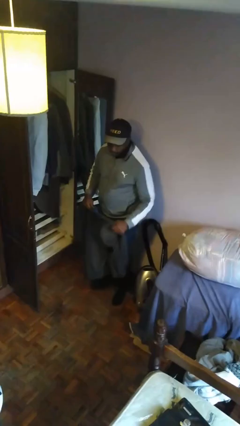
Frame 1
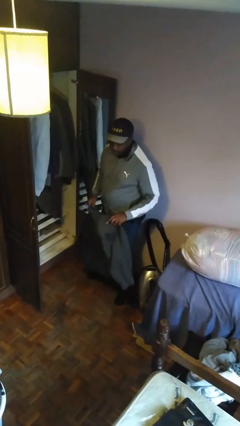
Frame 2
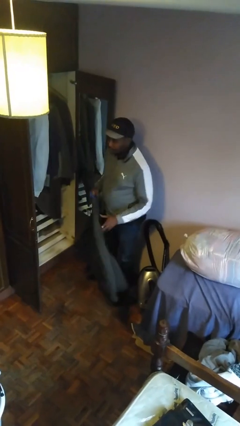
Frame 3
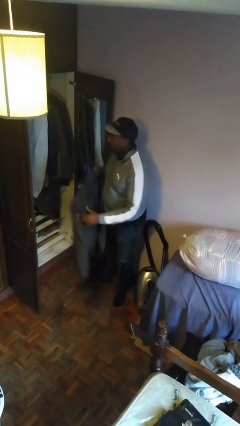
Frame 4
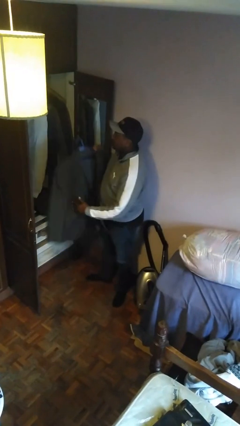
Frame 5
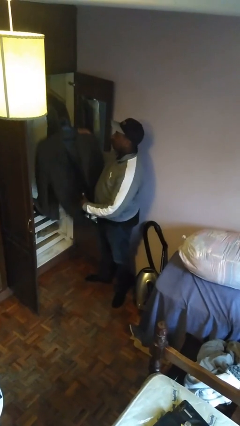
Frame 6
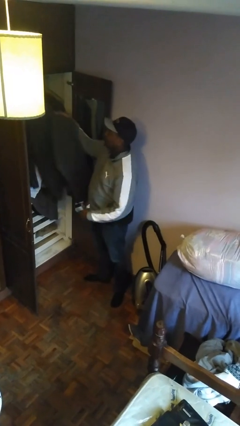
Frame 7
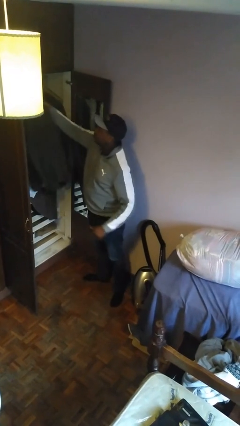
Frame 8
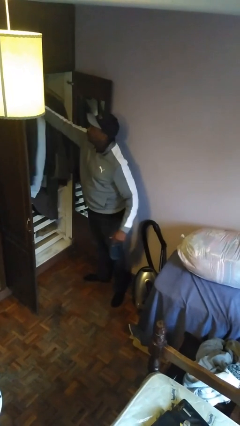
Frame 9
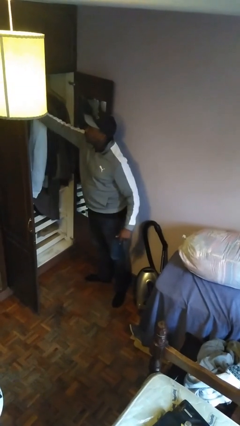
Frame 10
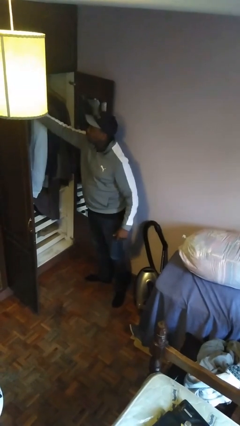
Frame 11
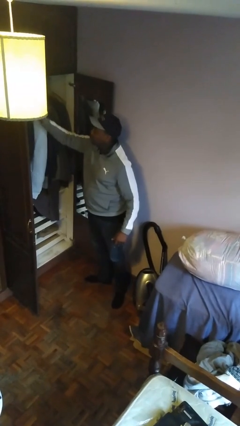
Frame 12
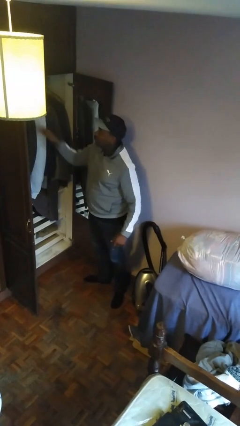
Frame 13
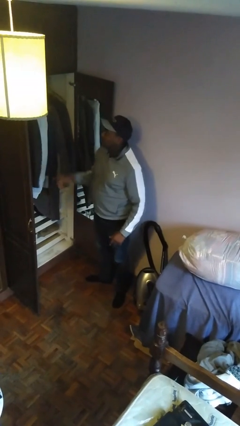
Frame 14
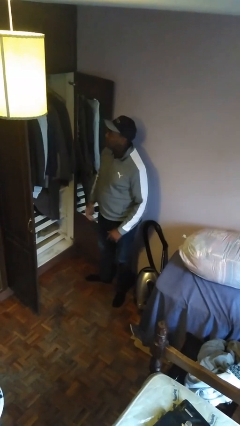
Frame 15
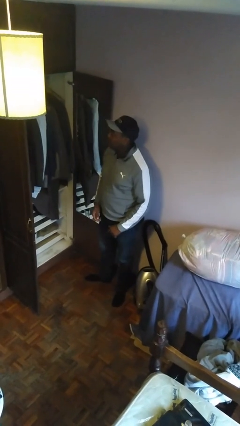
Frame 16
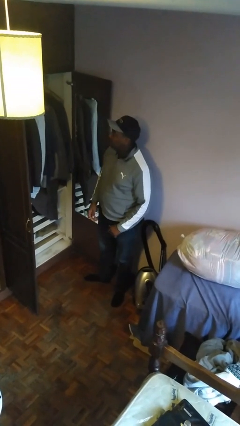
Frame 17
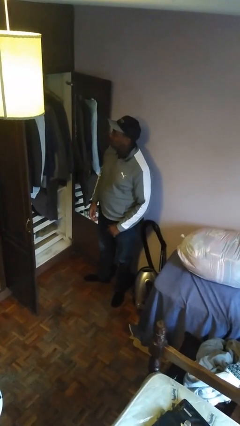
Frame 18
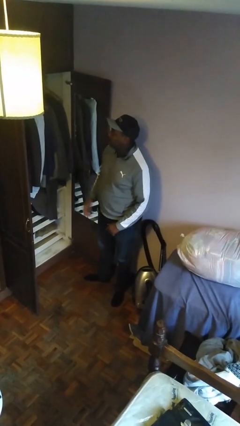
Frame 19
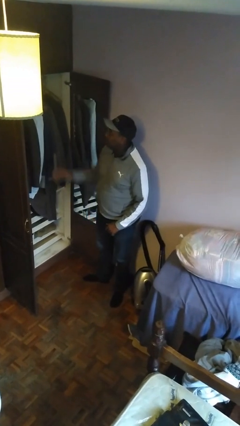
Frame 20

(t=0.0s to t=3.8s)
person puts clothes into closet

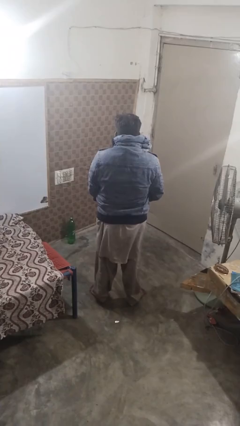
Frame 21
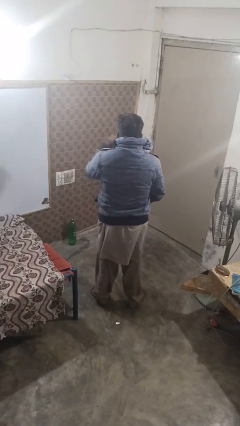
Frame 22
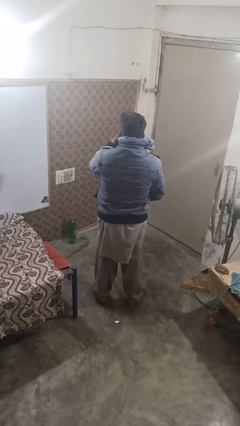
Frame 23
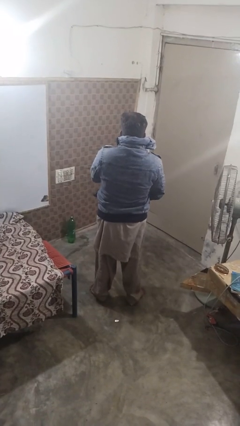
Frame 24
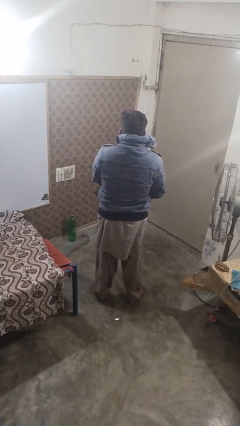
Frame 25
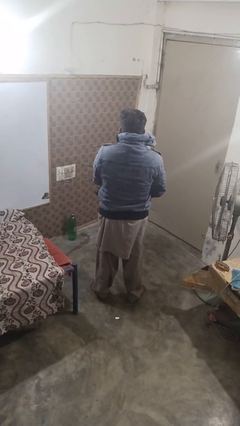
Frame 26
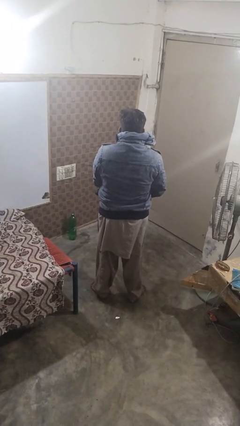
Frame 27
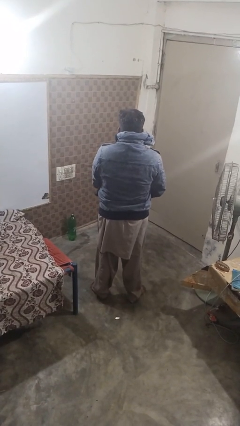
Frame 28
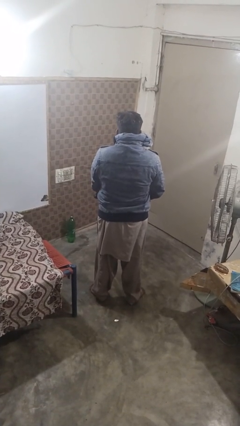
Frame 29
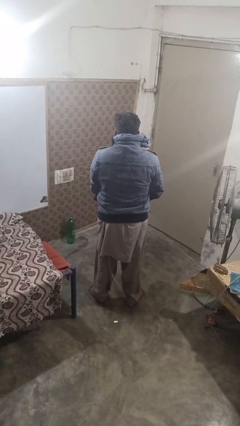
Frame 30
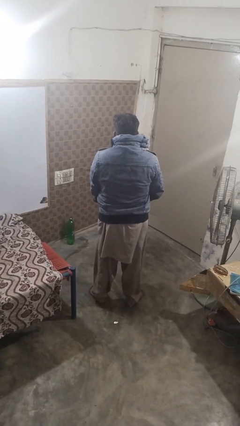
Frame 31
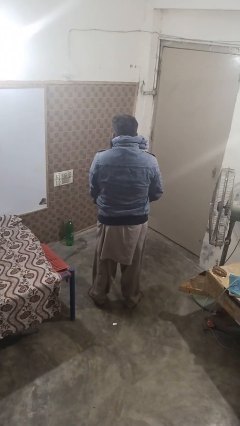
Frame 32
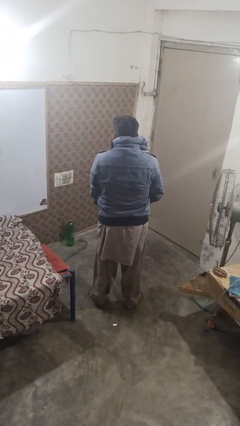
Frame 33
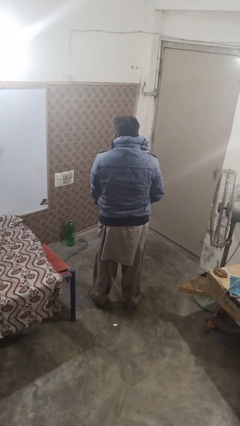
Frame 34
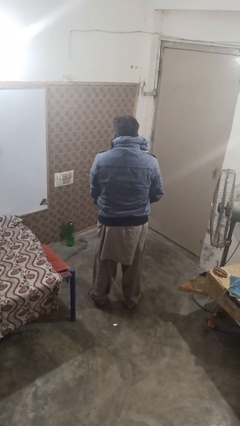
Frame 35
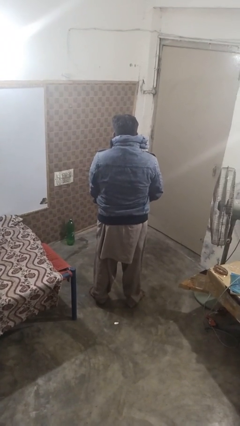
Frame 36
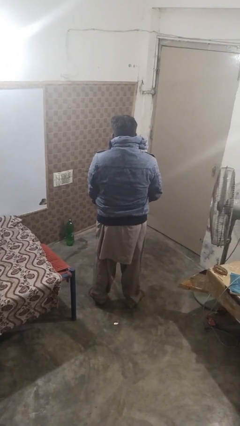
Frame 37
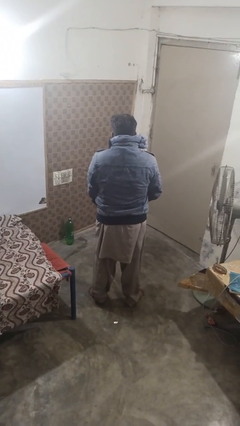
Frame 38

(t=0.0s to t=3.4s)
person unzips jacket

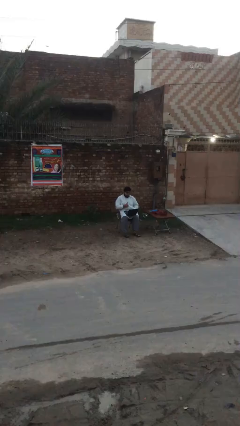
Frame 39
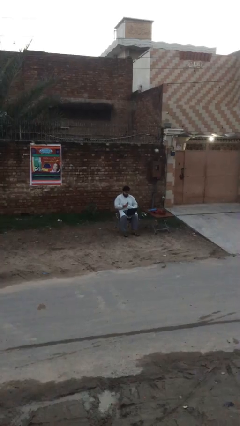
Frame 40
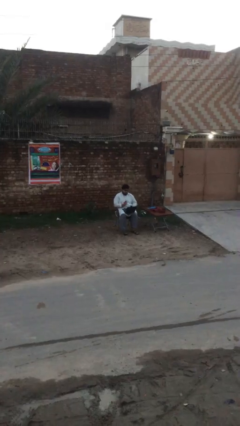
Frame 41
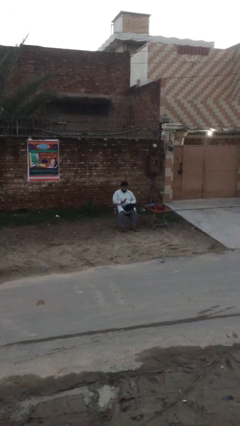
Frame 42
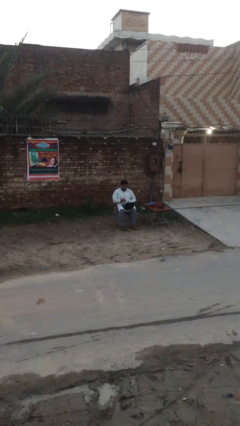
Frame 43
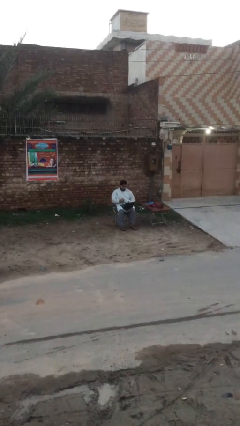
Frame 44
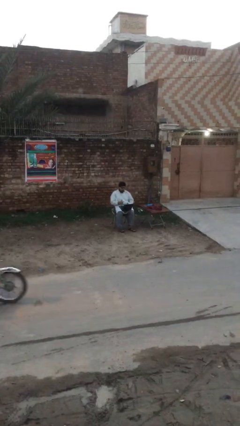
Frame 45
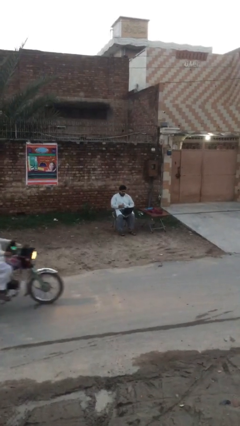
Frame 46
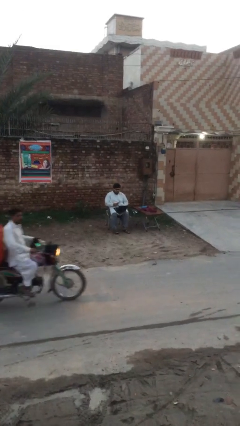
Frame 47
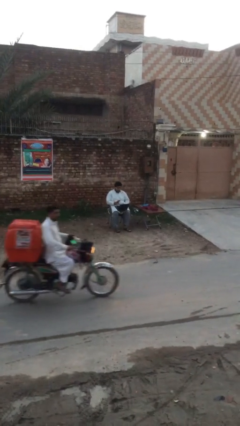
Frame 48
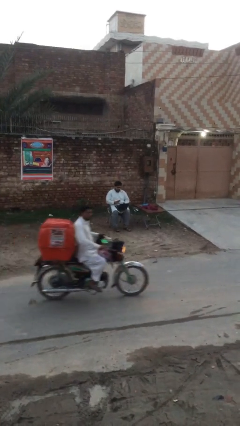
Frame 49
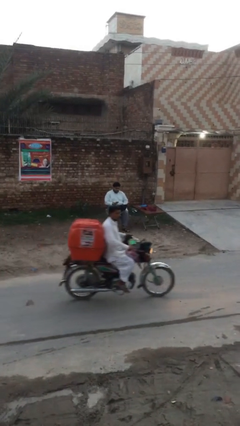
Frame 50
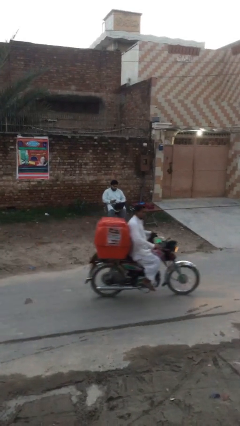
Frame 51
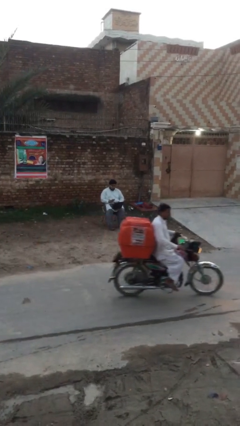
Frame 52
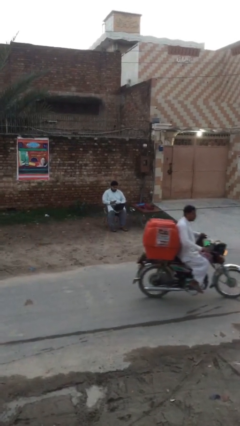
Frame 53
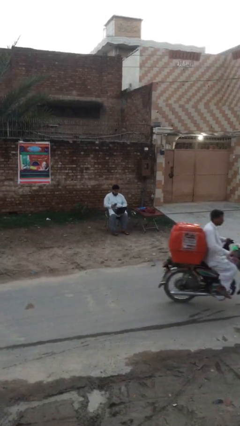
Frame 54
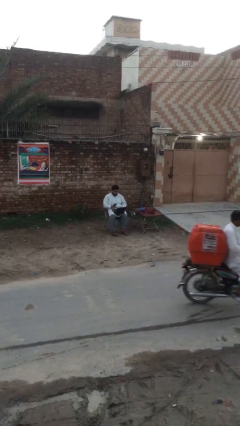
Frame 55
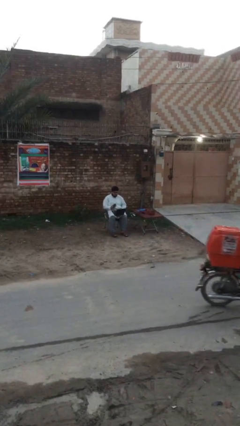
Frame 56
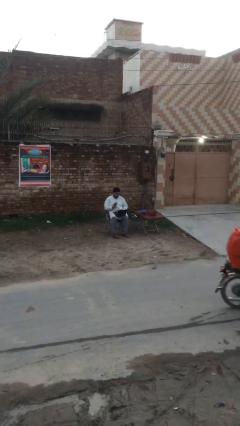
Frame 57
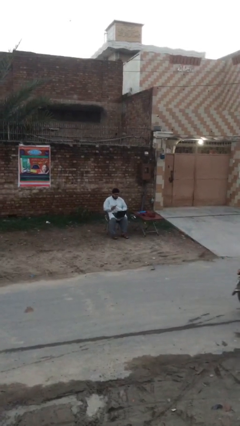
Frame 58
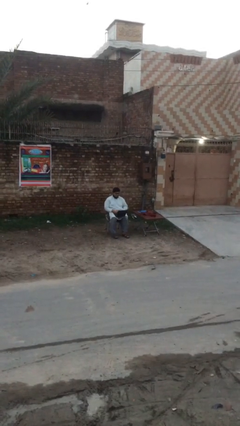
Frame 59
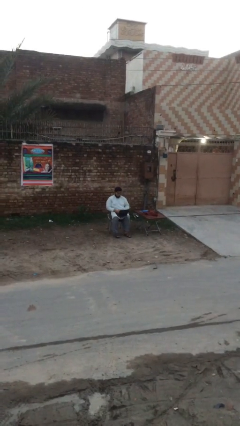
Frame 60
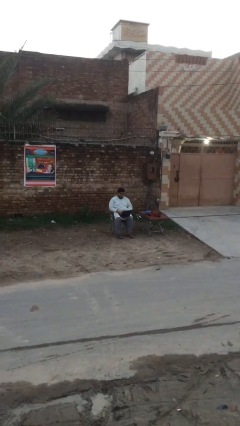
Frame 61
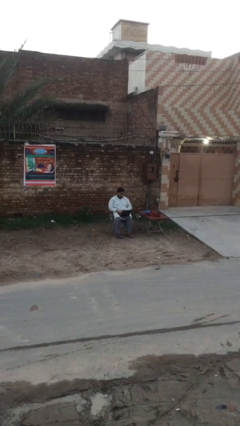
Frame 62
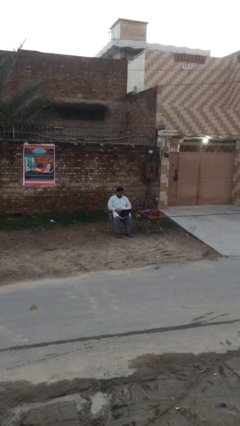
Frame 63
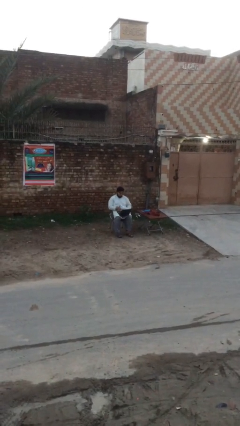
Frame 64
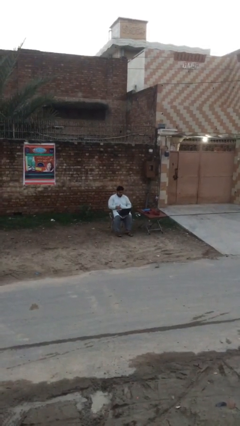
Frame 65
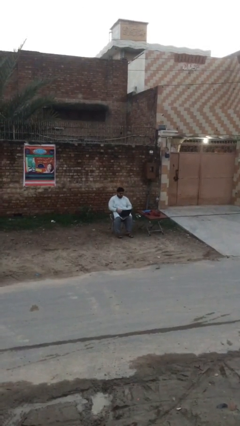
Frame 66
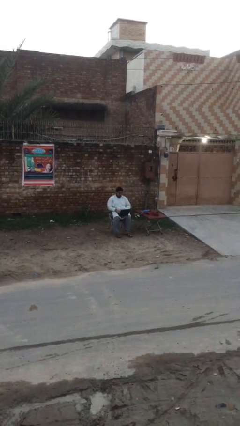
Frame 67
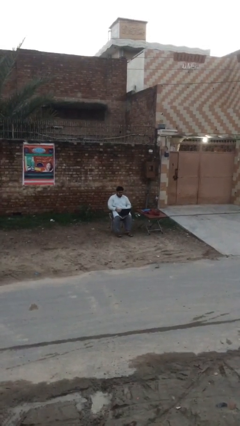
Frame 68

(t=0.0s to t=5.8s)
person interacts with laptop

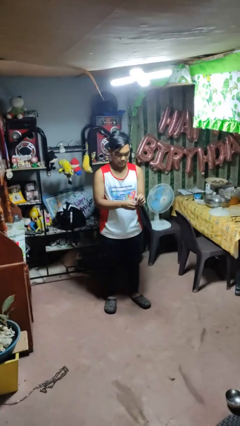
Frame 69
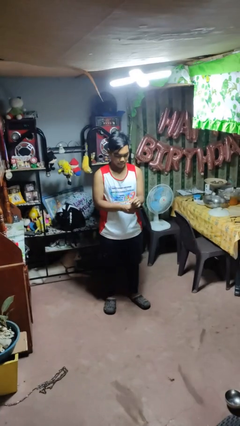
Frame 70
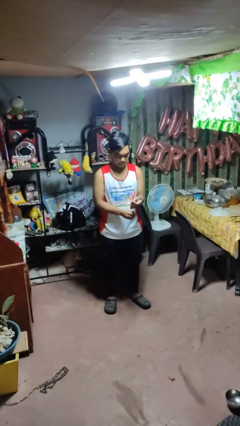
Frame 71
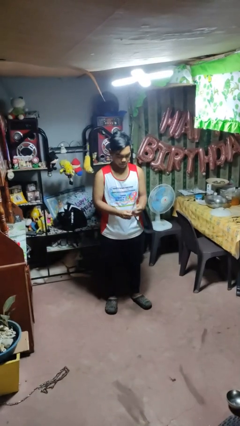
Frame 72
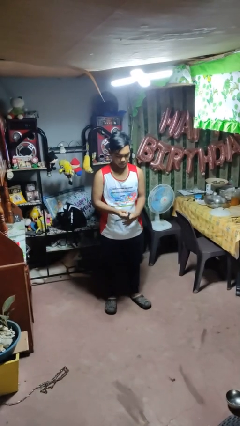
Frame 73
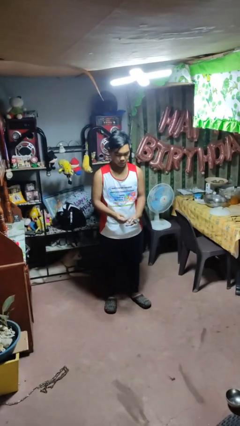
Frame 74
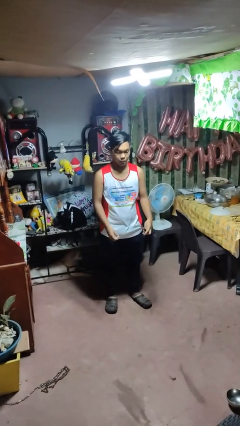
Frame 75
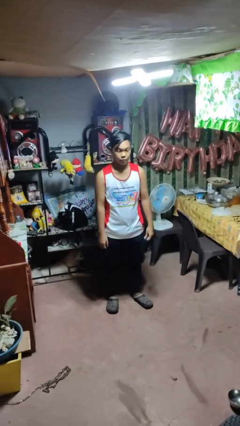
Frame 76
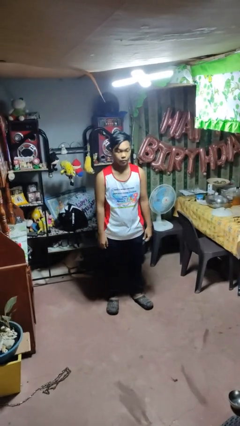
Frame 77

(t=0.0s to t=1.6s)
person takes off wristwatch

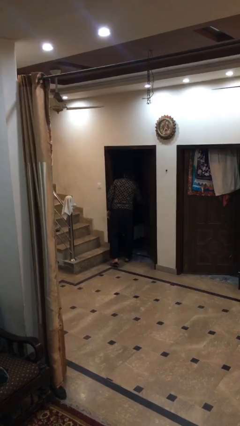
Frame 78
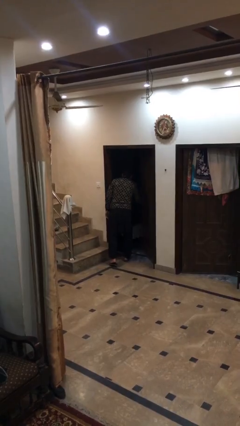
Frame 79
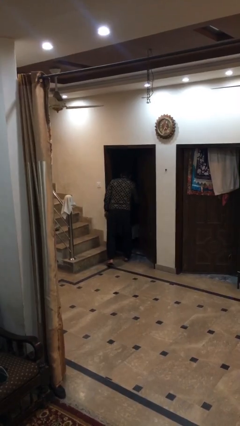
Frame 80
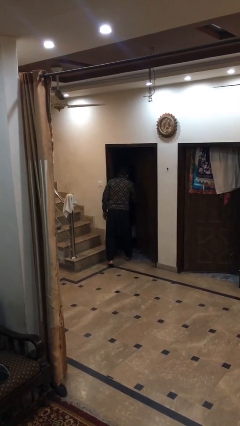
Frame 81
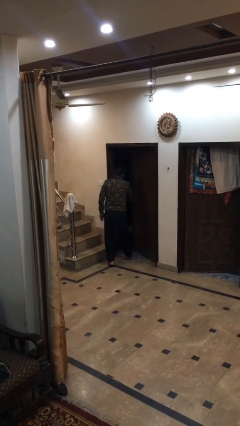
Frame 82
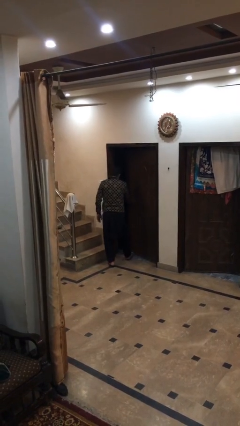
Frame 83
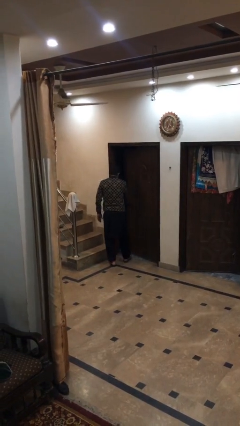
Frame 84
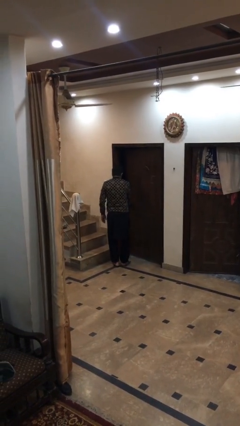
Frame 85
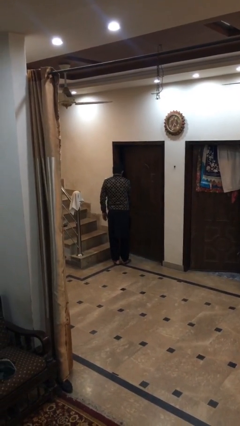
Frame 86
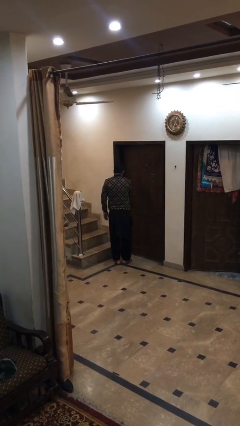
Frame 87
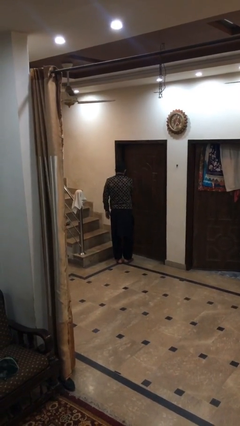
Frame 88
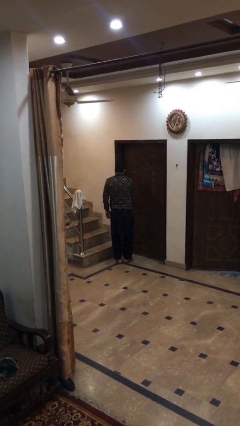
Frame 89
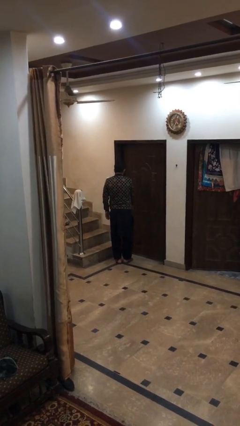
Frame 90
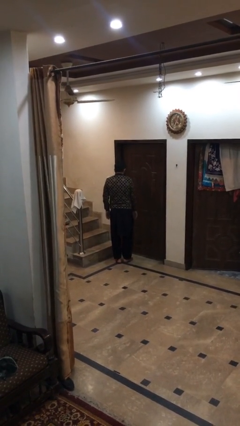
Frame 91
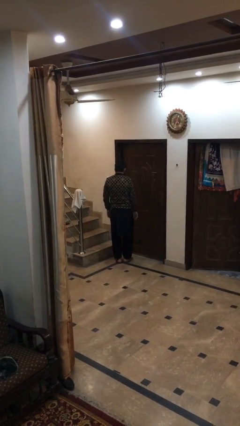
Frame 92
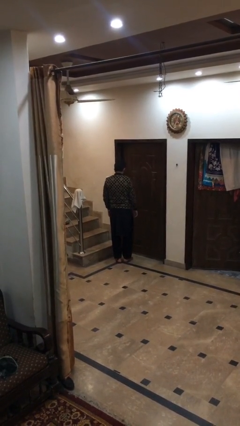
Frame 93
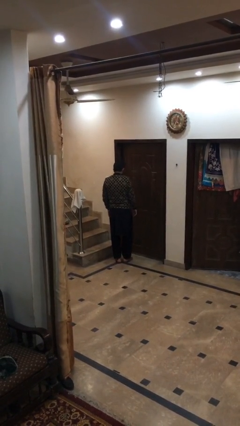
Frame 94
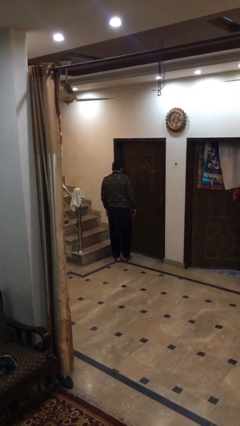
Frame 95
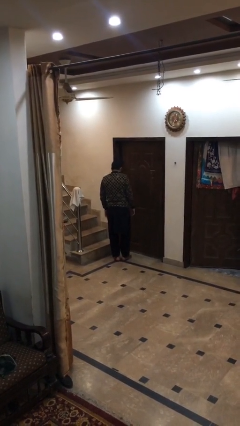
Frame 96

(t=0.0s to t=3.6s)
person closes facility door
